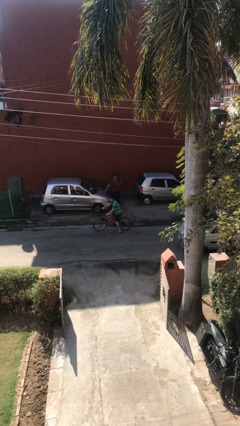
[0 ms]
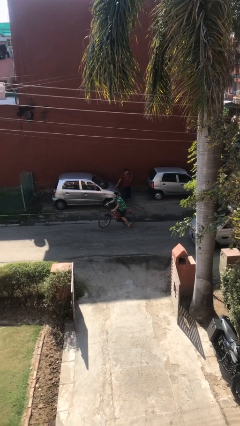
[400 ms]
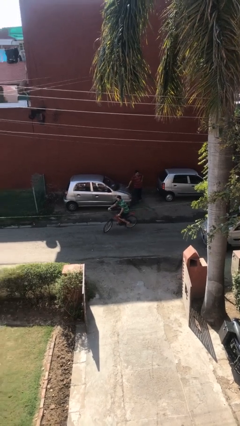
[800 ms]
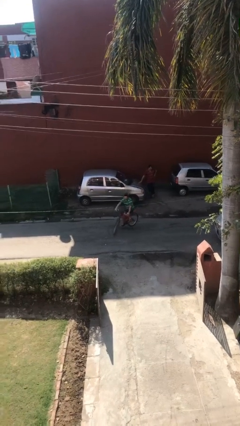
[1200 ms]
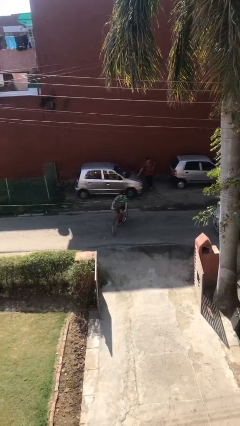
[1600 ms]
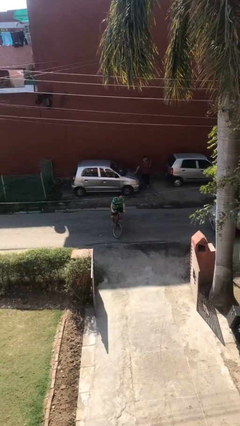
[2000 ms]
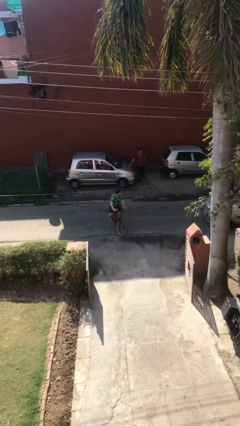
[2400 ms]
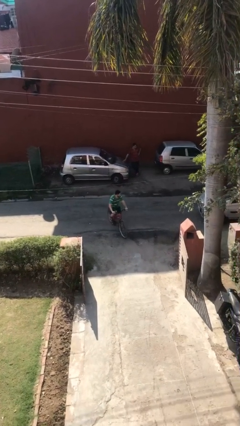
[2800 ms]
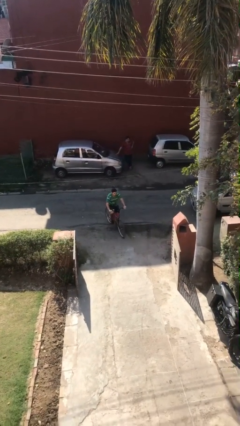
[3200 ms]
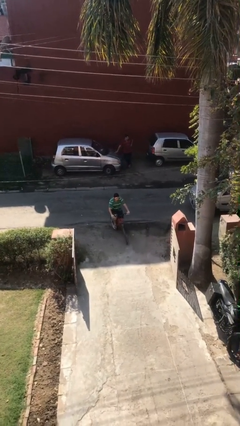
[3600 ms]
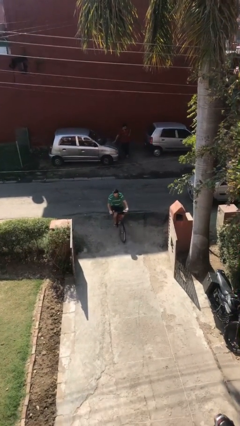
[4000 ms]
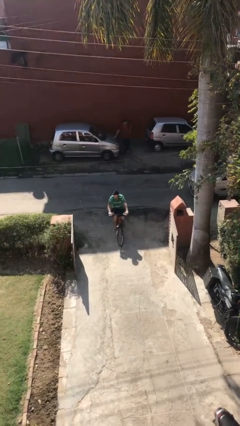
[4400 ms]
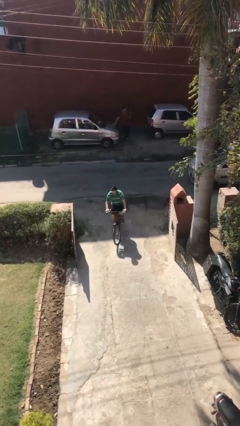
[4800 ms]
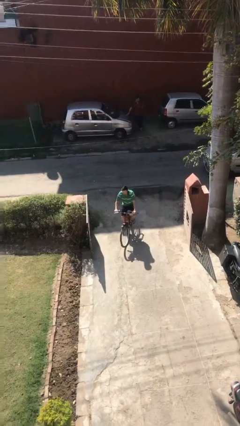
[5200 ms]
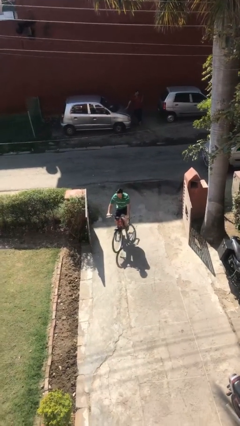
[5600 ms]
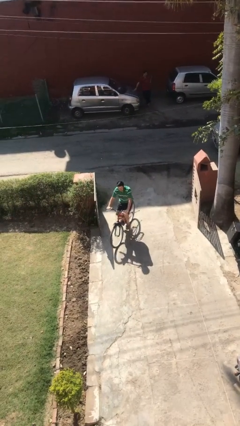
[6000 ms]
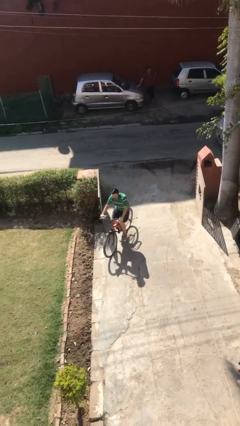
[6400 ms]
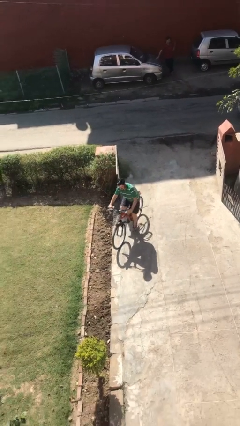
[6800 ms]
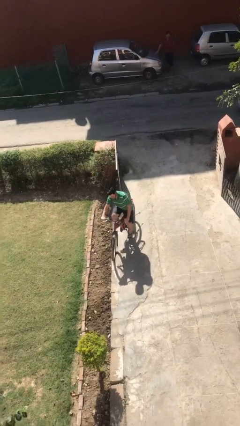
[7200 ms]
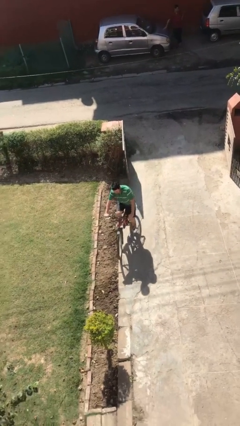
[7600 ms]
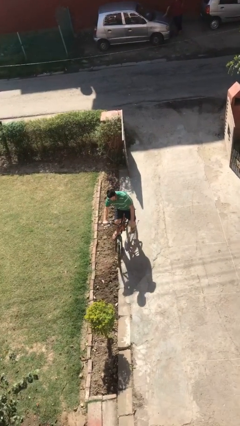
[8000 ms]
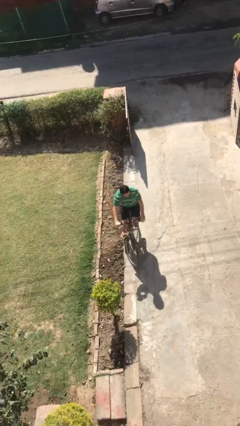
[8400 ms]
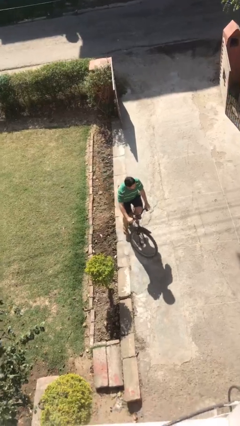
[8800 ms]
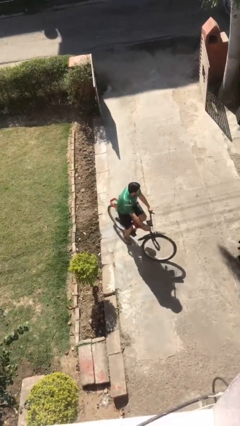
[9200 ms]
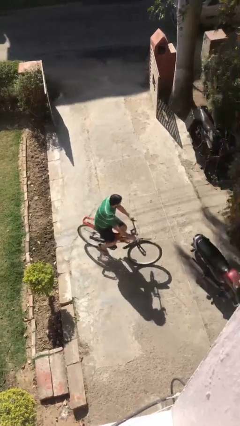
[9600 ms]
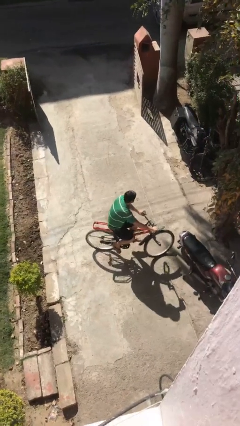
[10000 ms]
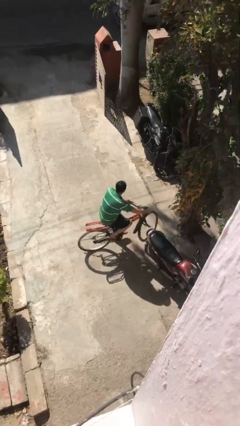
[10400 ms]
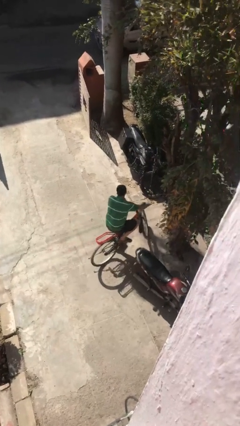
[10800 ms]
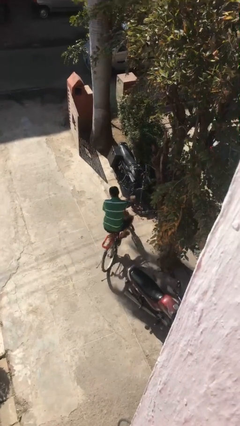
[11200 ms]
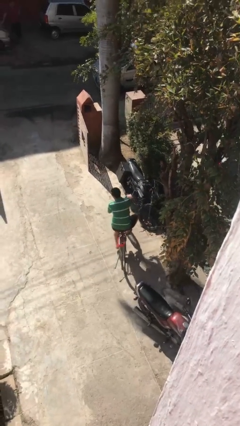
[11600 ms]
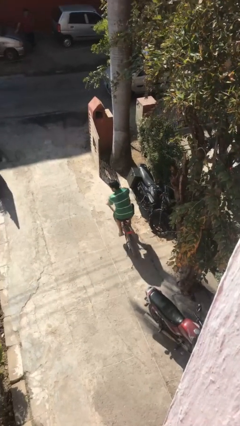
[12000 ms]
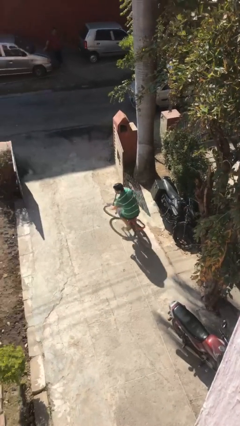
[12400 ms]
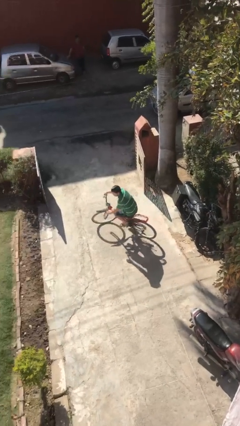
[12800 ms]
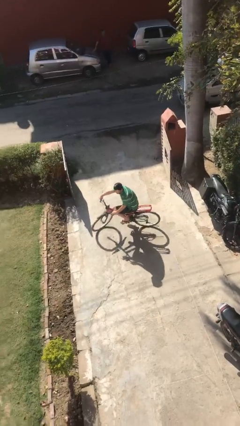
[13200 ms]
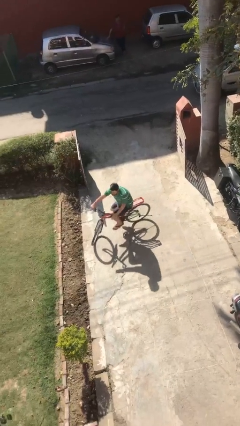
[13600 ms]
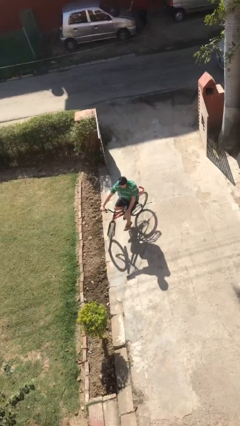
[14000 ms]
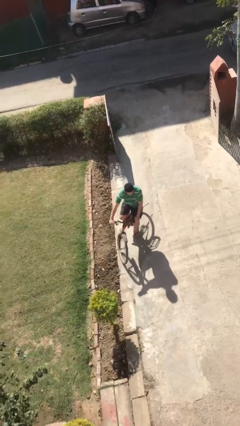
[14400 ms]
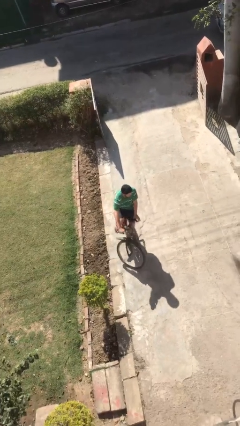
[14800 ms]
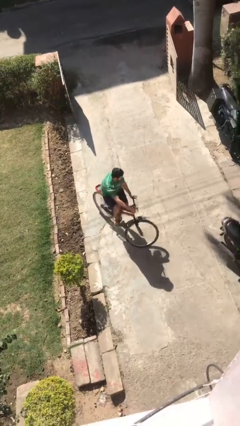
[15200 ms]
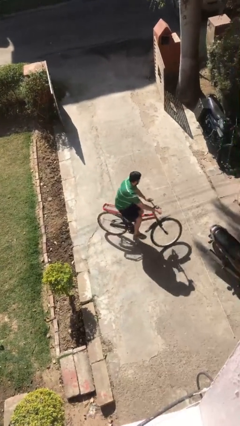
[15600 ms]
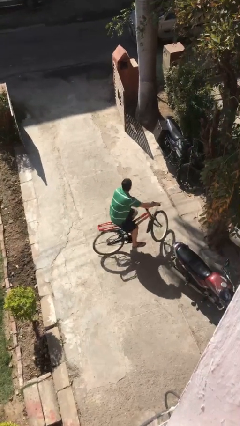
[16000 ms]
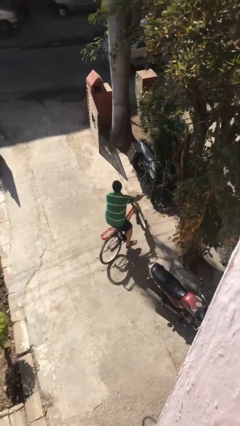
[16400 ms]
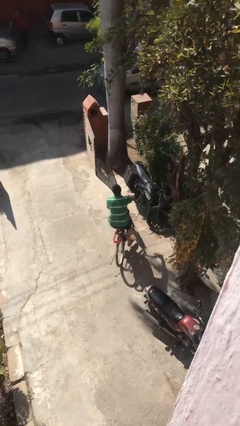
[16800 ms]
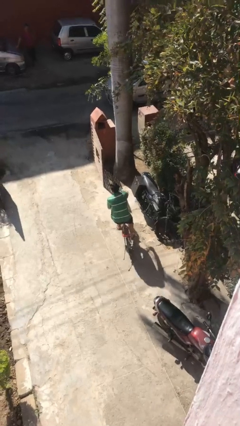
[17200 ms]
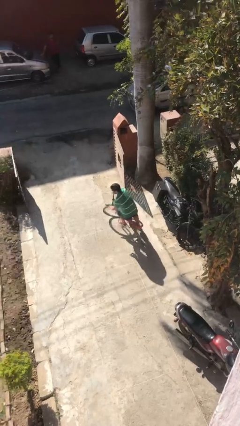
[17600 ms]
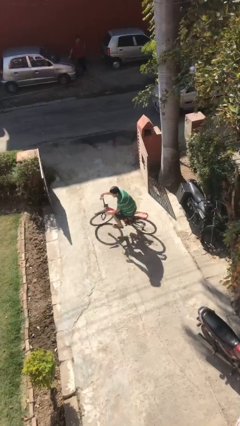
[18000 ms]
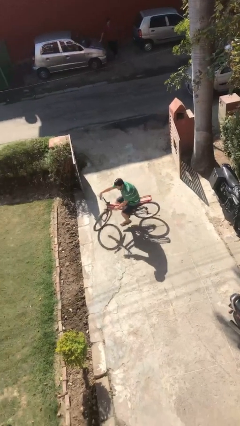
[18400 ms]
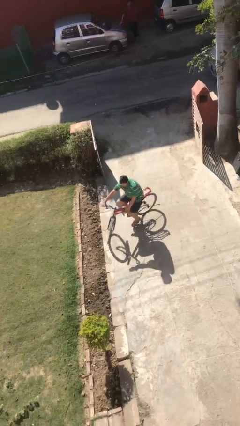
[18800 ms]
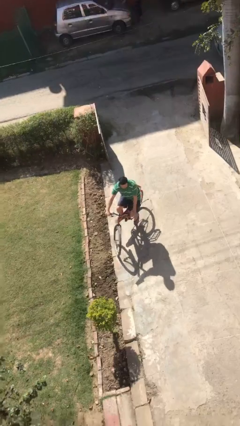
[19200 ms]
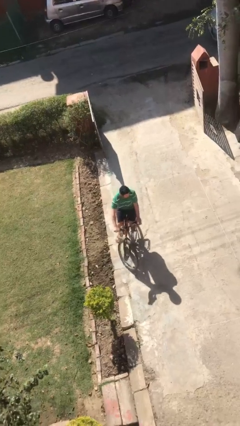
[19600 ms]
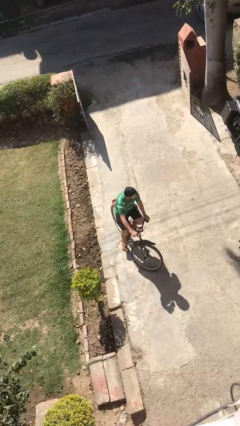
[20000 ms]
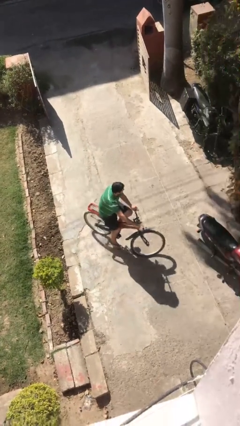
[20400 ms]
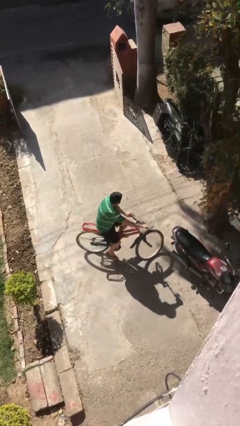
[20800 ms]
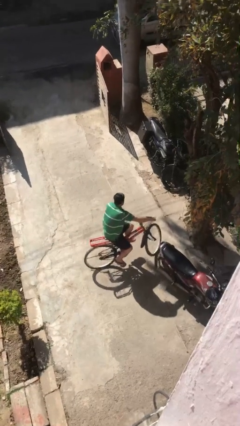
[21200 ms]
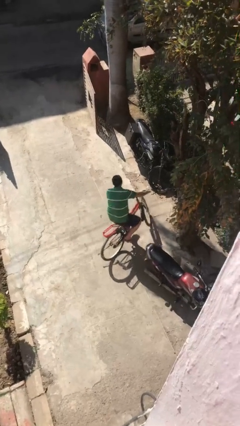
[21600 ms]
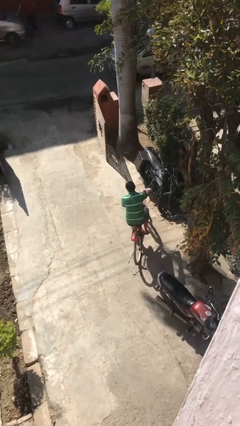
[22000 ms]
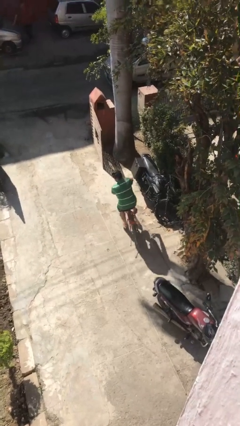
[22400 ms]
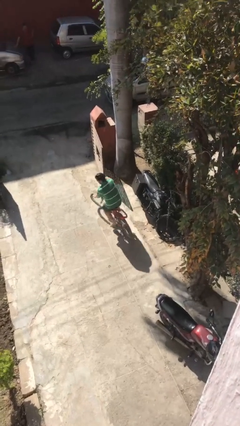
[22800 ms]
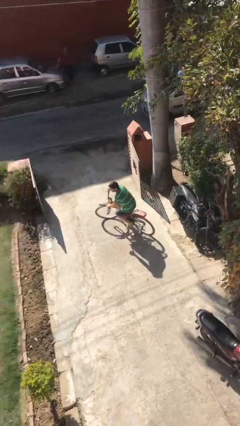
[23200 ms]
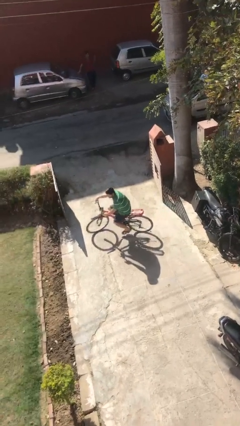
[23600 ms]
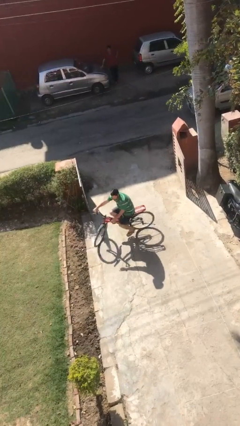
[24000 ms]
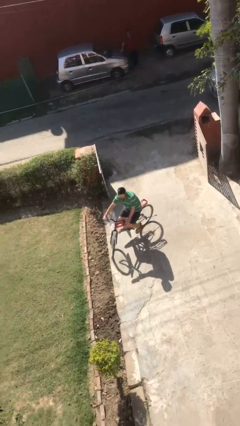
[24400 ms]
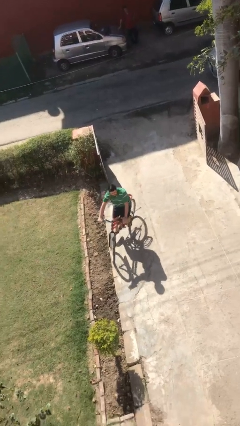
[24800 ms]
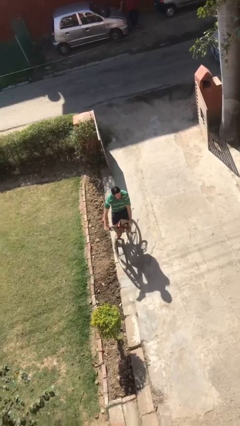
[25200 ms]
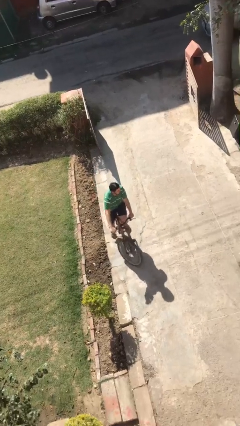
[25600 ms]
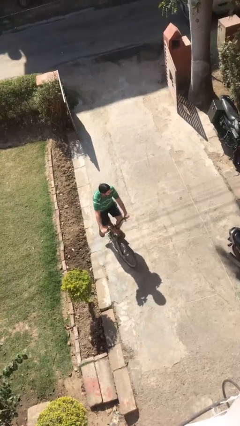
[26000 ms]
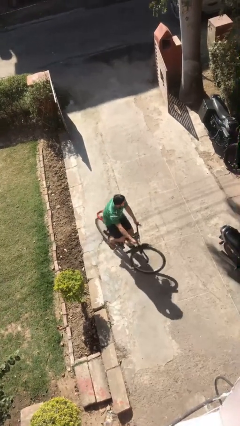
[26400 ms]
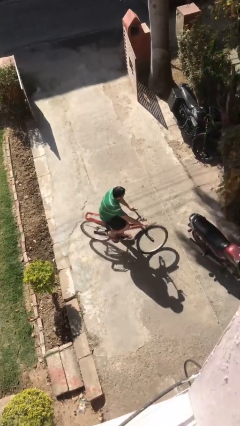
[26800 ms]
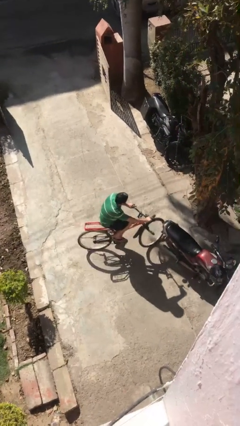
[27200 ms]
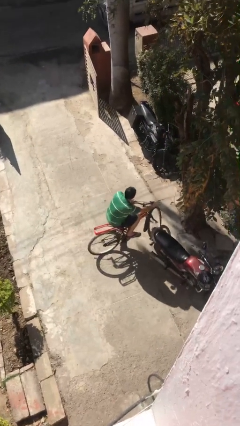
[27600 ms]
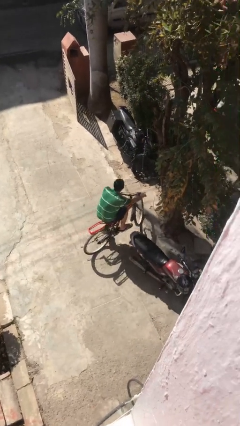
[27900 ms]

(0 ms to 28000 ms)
person rides bicycle

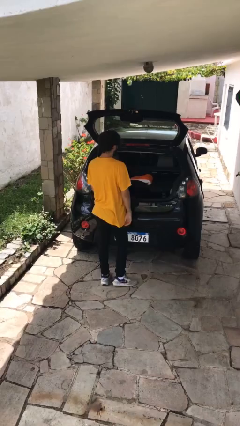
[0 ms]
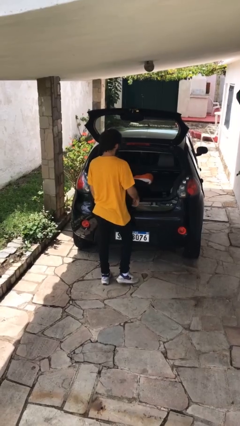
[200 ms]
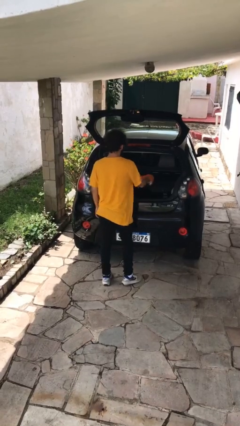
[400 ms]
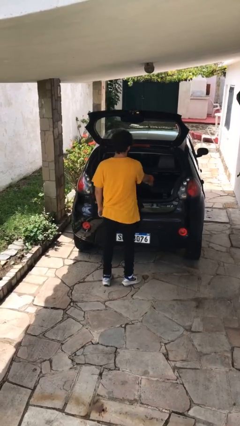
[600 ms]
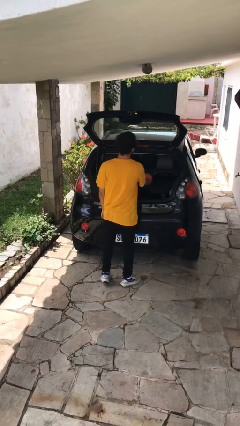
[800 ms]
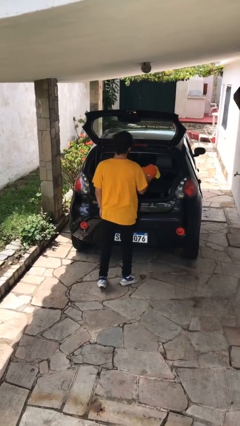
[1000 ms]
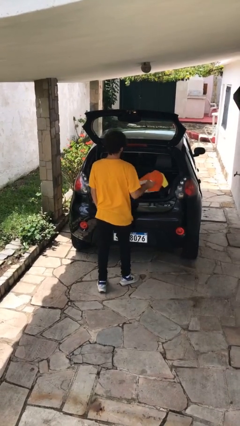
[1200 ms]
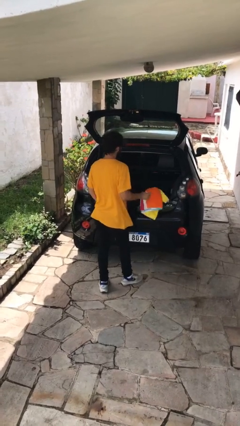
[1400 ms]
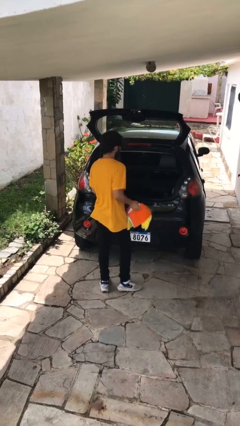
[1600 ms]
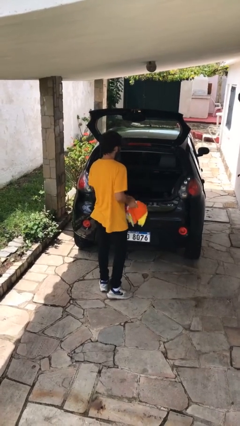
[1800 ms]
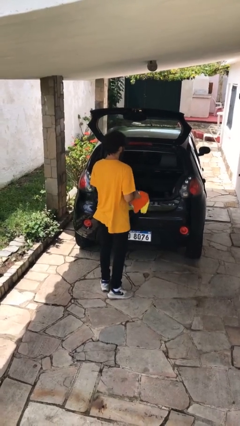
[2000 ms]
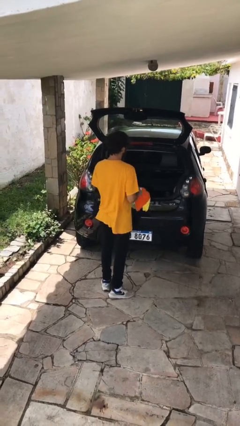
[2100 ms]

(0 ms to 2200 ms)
person unloads car

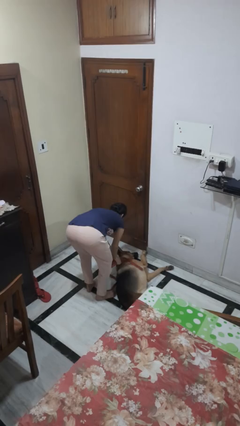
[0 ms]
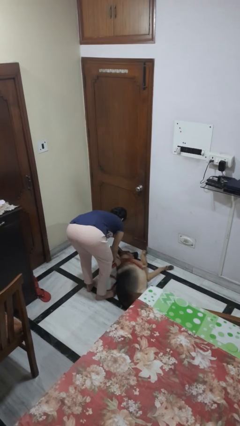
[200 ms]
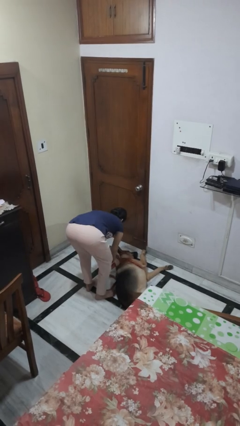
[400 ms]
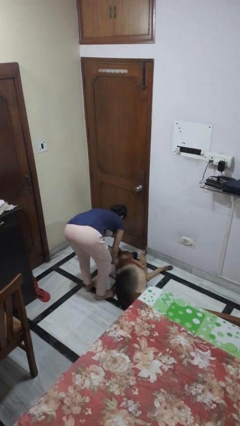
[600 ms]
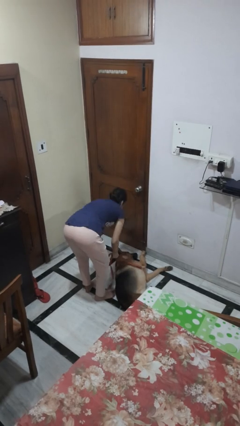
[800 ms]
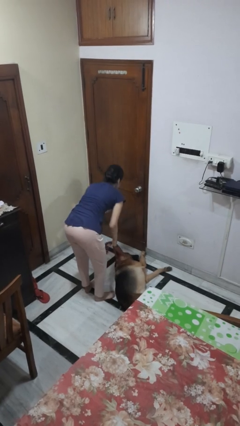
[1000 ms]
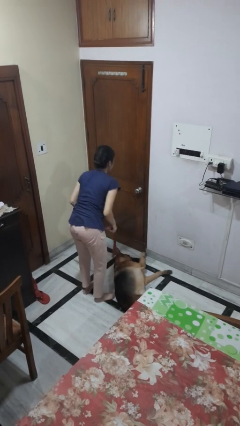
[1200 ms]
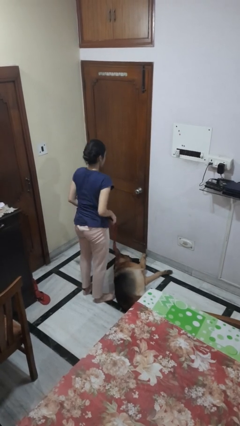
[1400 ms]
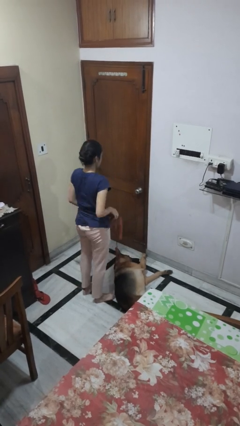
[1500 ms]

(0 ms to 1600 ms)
person attaches leash to dog
